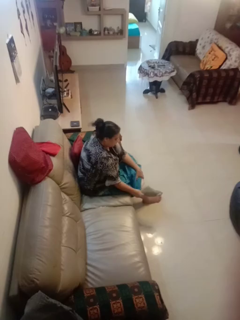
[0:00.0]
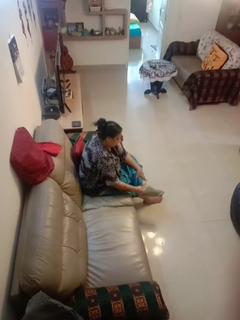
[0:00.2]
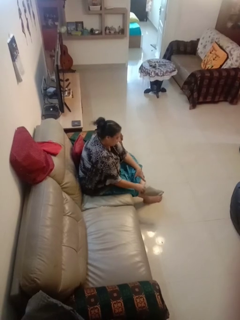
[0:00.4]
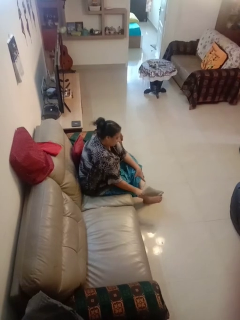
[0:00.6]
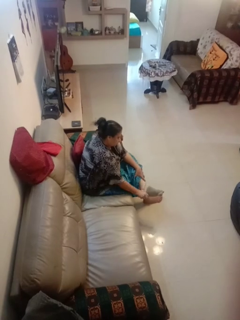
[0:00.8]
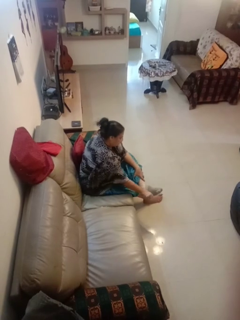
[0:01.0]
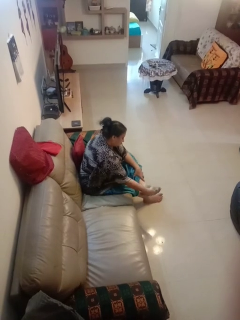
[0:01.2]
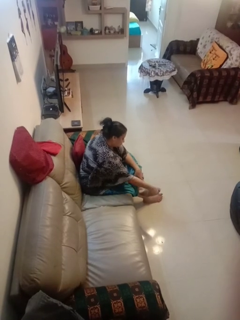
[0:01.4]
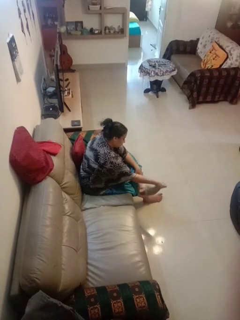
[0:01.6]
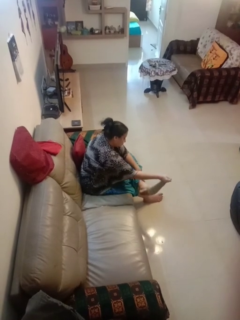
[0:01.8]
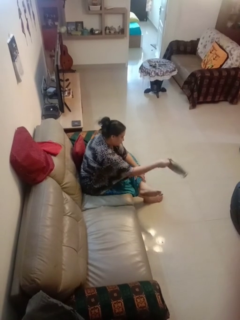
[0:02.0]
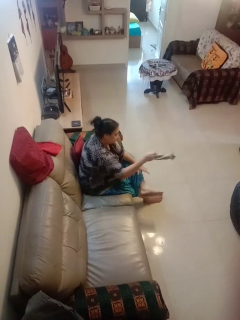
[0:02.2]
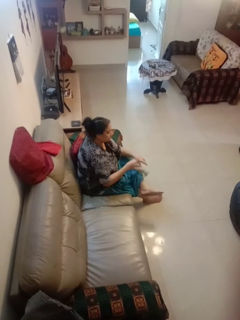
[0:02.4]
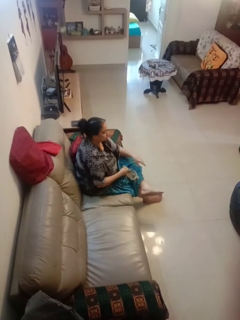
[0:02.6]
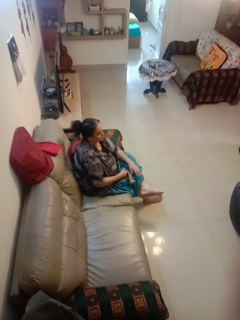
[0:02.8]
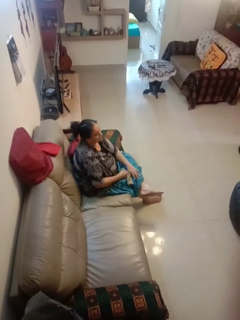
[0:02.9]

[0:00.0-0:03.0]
person takes off socks

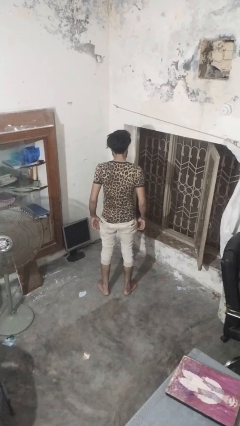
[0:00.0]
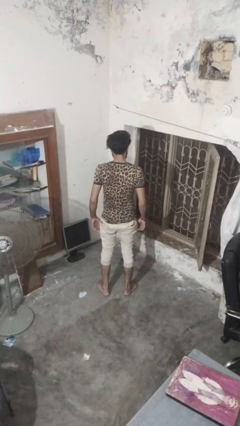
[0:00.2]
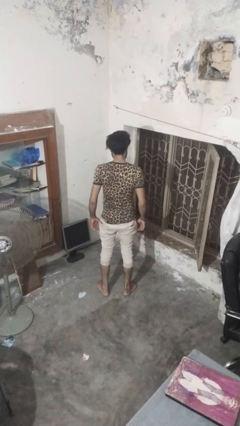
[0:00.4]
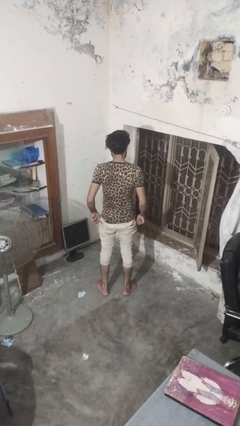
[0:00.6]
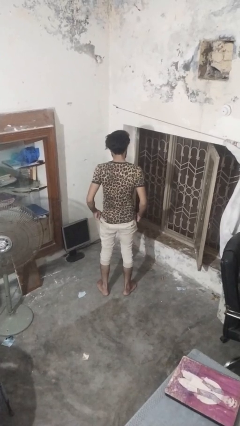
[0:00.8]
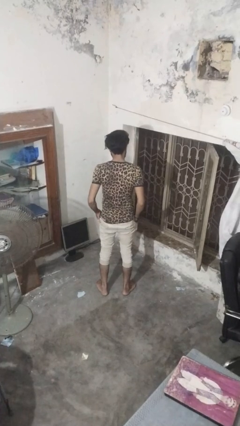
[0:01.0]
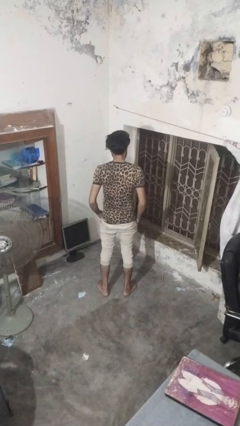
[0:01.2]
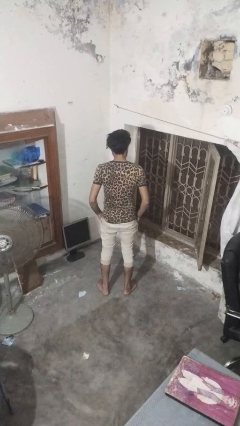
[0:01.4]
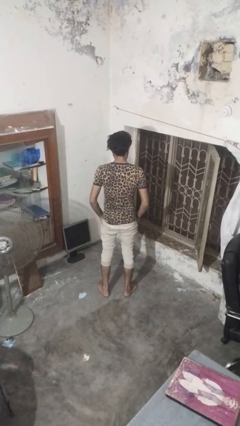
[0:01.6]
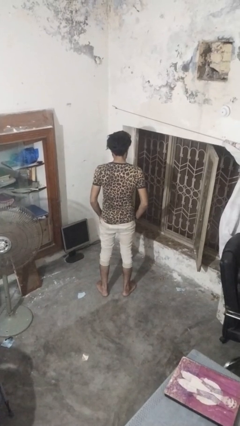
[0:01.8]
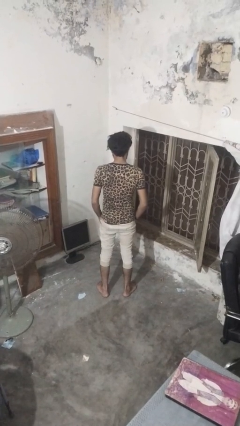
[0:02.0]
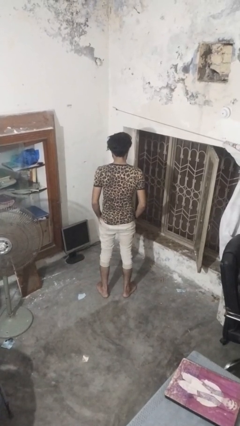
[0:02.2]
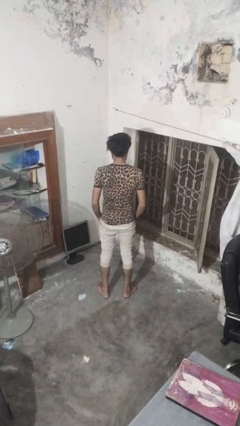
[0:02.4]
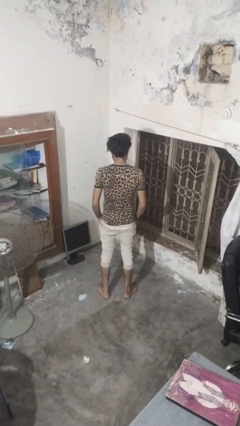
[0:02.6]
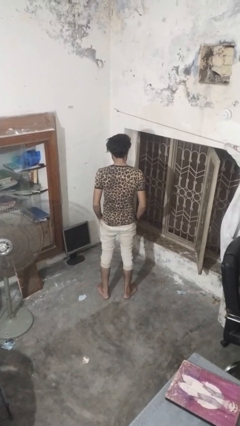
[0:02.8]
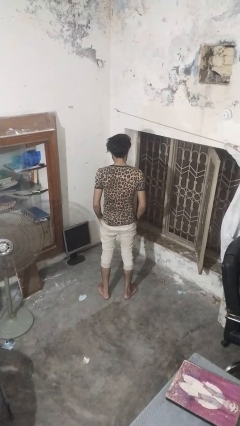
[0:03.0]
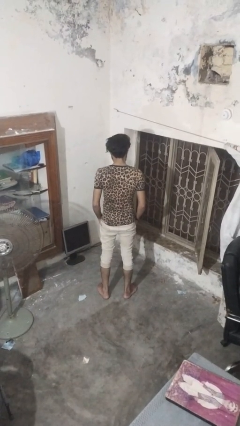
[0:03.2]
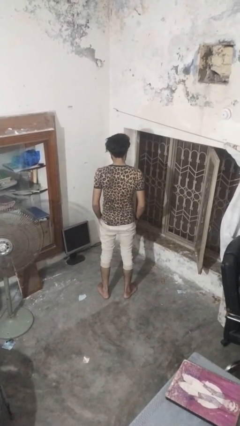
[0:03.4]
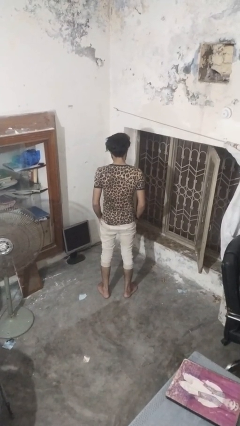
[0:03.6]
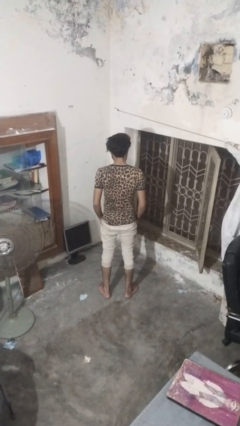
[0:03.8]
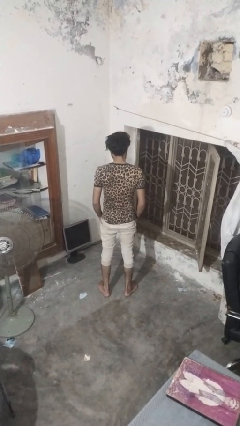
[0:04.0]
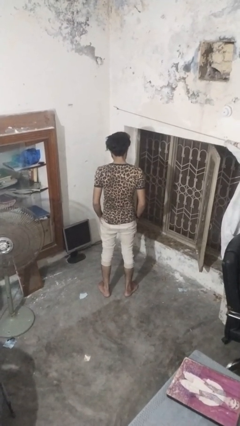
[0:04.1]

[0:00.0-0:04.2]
person puts hands in back pockets

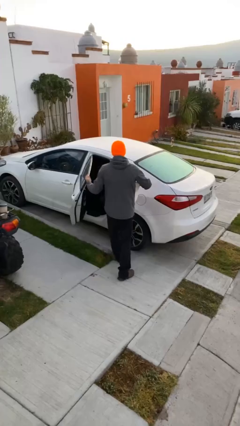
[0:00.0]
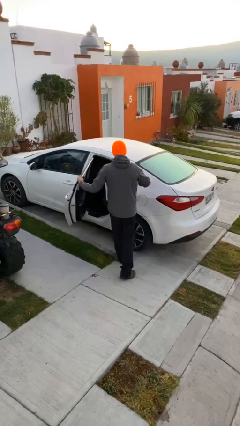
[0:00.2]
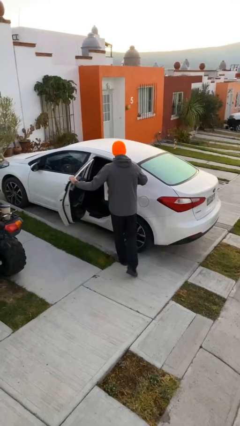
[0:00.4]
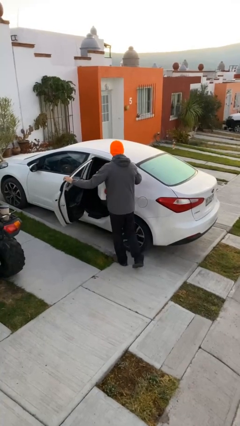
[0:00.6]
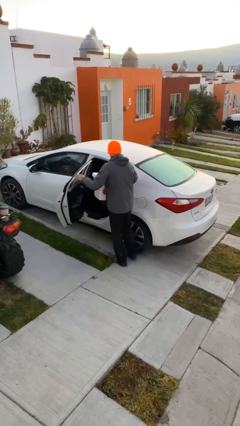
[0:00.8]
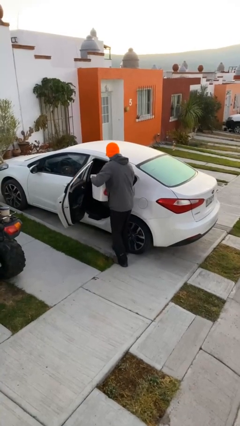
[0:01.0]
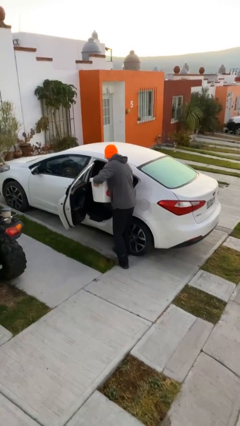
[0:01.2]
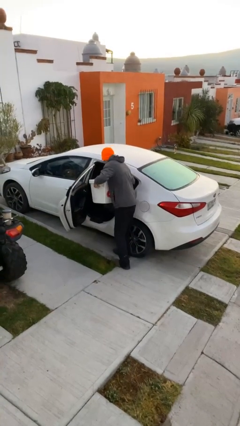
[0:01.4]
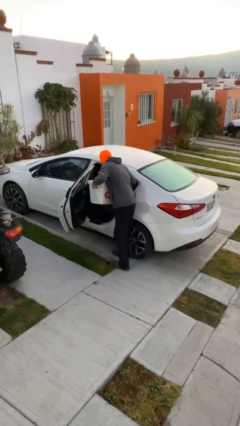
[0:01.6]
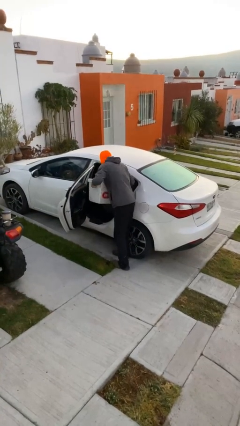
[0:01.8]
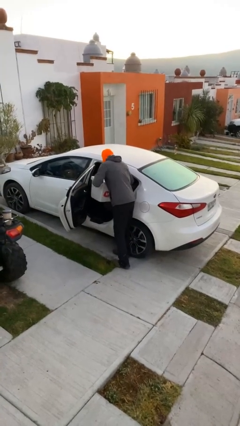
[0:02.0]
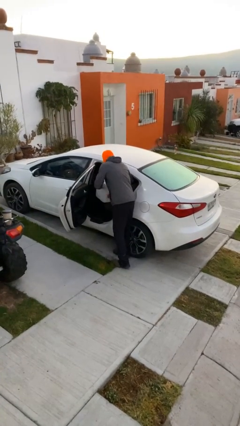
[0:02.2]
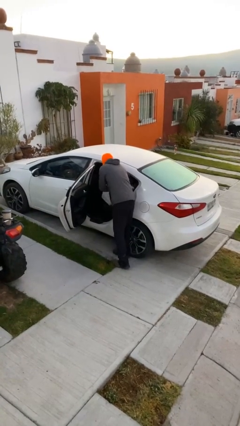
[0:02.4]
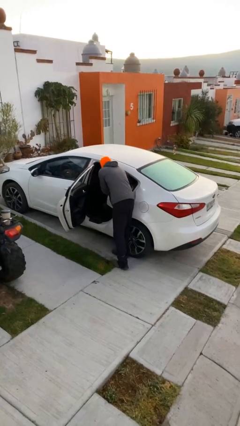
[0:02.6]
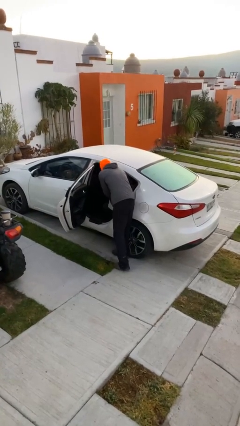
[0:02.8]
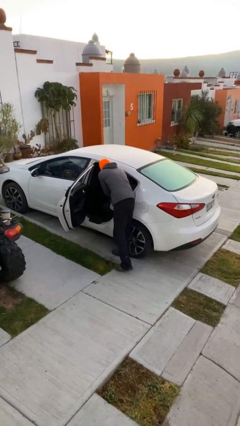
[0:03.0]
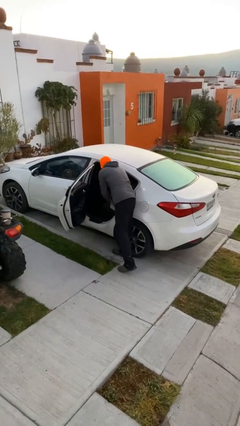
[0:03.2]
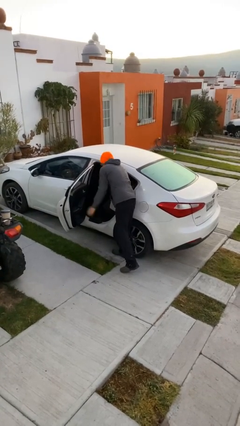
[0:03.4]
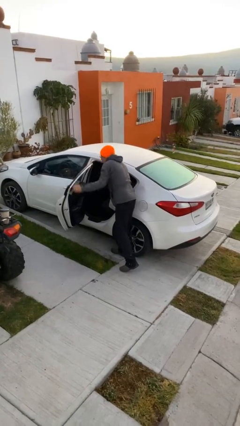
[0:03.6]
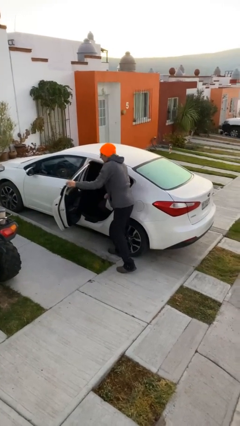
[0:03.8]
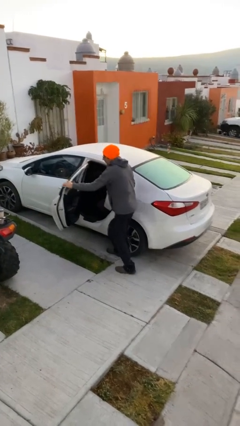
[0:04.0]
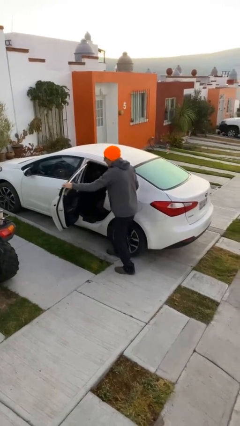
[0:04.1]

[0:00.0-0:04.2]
person loads car

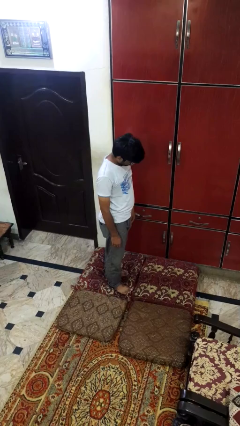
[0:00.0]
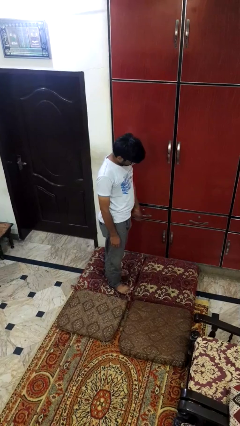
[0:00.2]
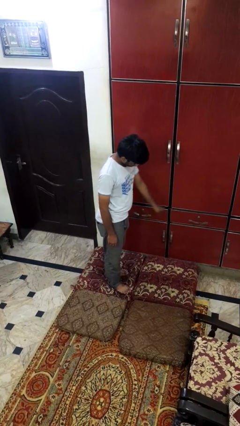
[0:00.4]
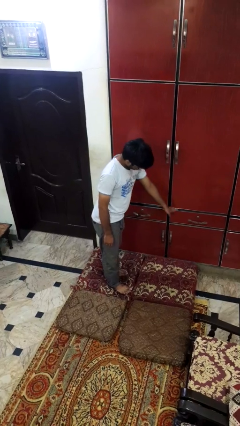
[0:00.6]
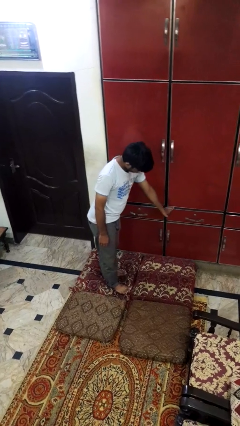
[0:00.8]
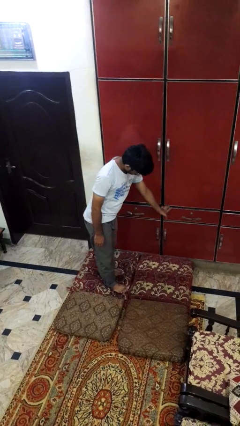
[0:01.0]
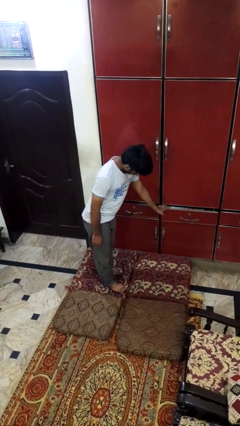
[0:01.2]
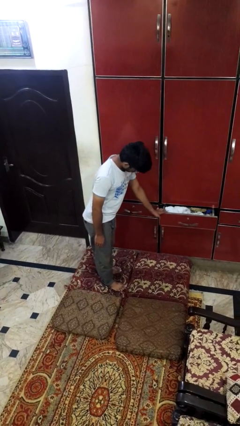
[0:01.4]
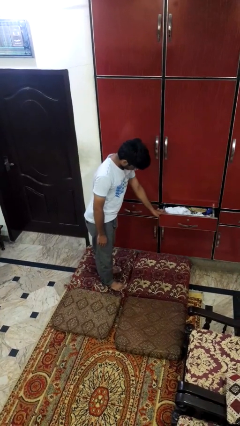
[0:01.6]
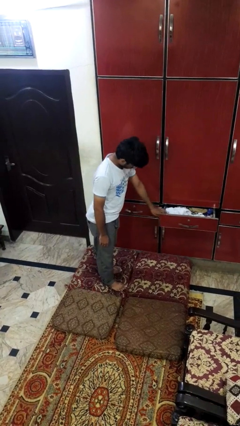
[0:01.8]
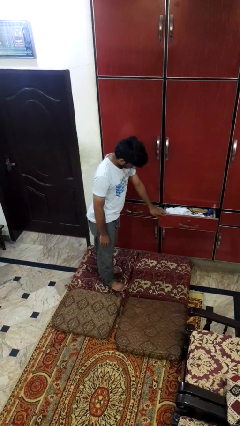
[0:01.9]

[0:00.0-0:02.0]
person opens dresser drawer

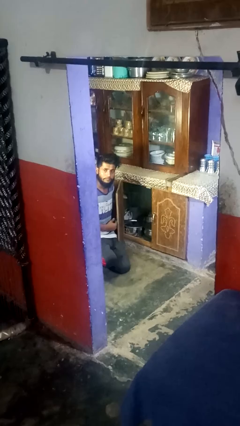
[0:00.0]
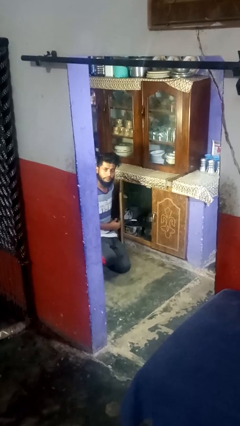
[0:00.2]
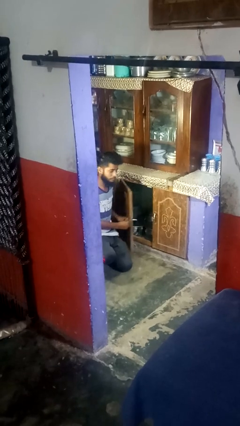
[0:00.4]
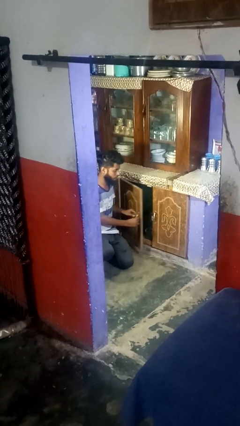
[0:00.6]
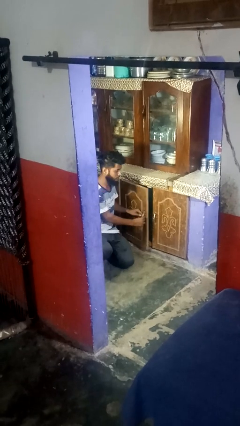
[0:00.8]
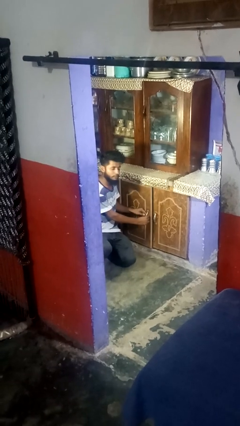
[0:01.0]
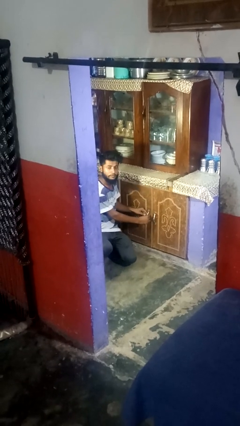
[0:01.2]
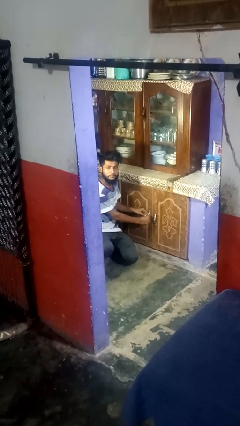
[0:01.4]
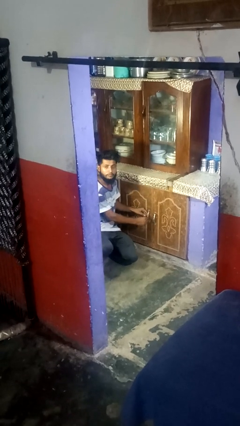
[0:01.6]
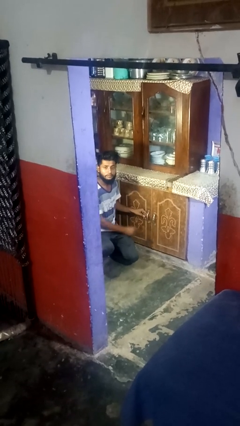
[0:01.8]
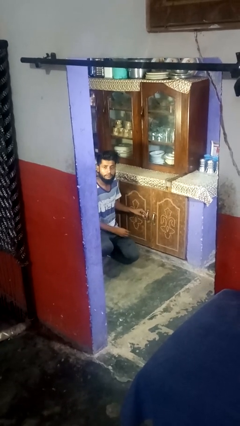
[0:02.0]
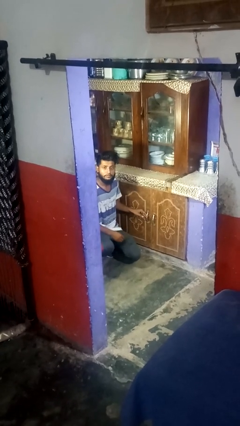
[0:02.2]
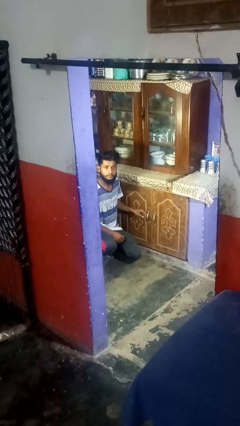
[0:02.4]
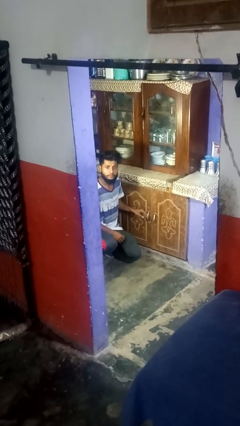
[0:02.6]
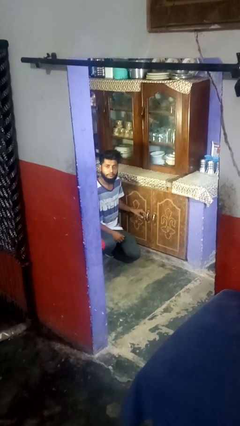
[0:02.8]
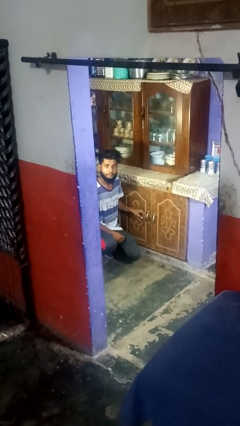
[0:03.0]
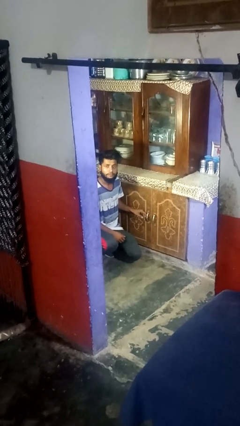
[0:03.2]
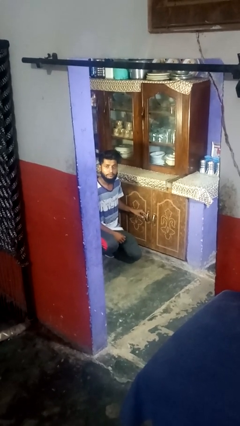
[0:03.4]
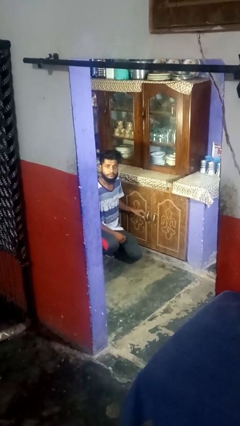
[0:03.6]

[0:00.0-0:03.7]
person closes cabinet

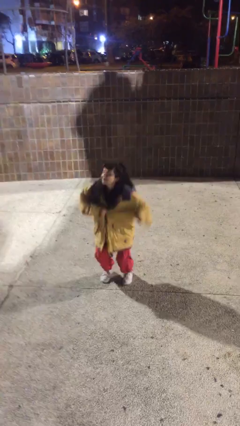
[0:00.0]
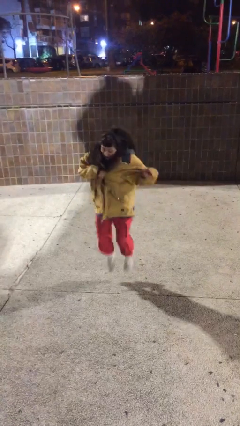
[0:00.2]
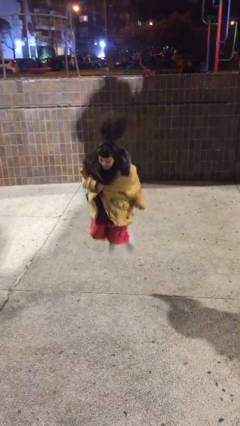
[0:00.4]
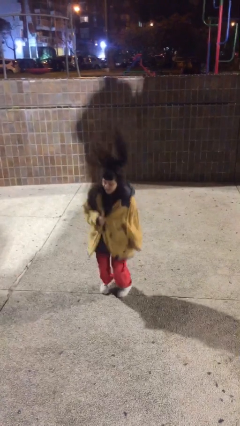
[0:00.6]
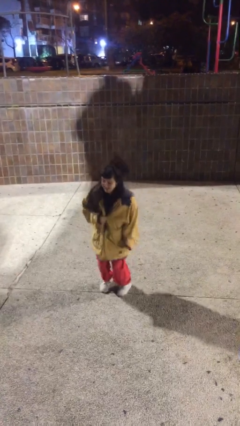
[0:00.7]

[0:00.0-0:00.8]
person jumps

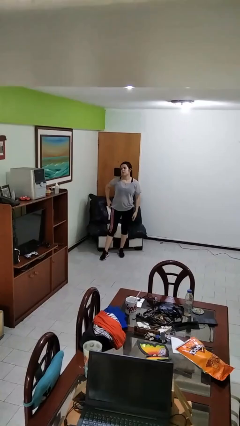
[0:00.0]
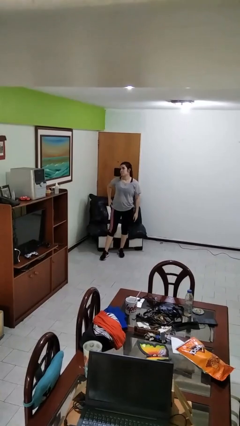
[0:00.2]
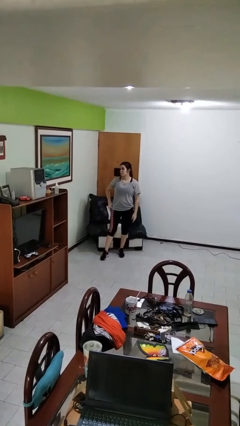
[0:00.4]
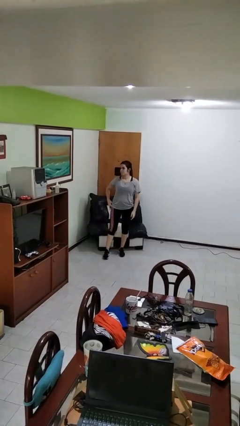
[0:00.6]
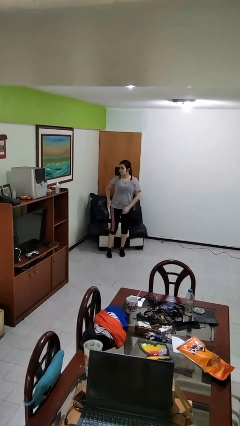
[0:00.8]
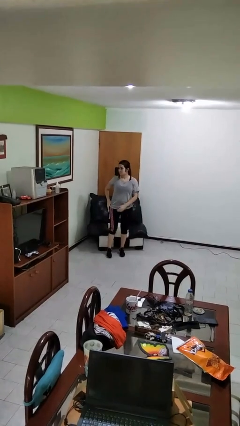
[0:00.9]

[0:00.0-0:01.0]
person puts phone into pocket
